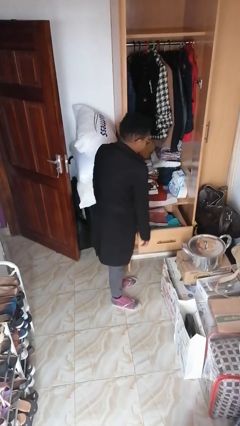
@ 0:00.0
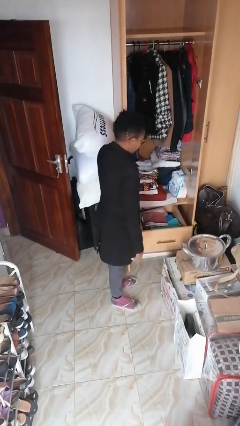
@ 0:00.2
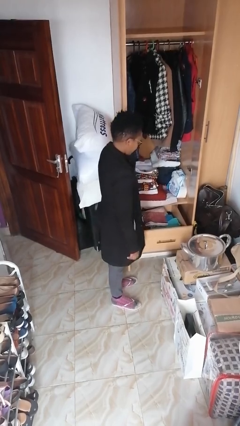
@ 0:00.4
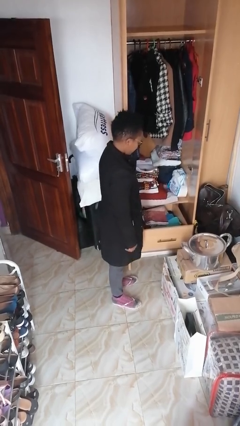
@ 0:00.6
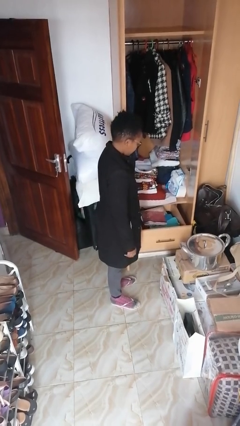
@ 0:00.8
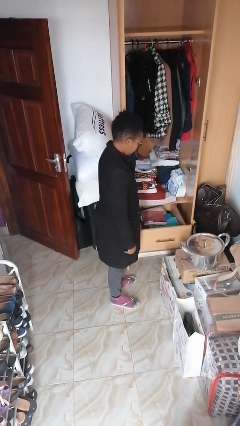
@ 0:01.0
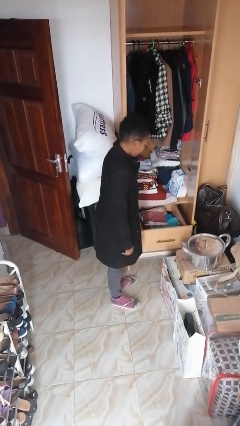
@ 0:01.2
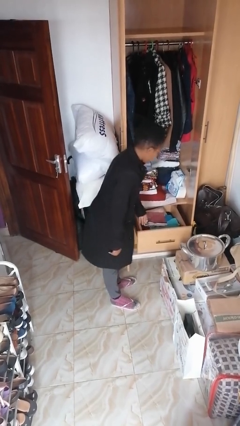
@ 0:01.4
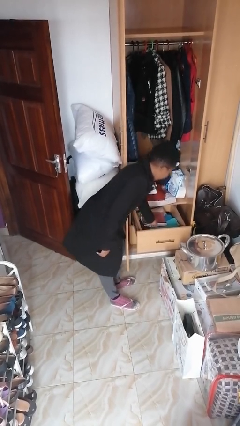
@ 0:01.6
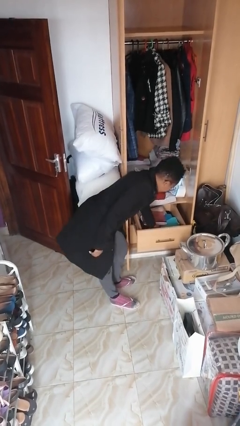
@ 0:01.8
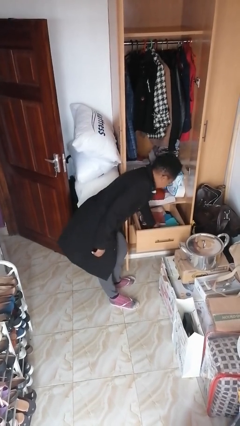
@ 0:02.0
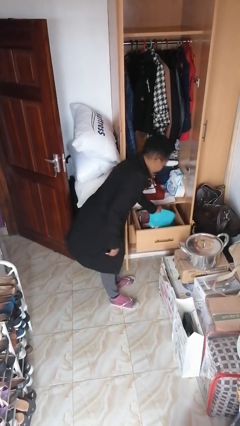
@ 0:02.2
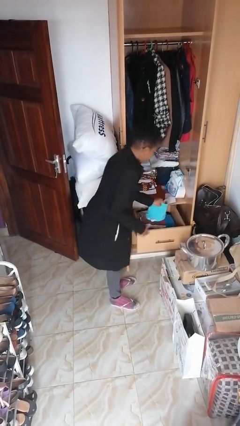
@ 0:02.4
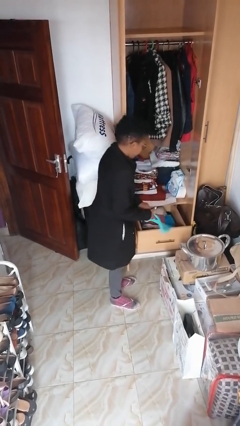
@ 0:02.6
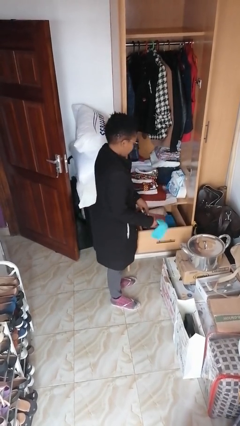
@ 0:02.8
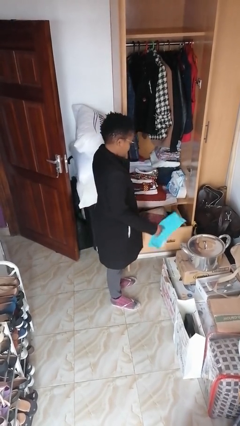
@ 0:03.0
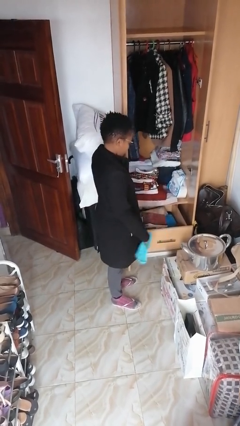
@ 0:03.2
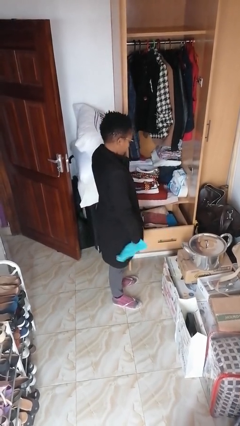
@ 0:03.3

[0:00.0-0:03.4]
person pets cat

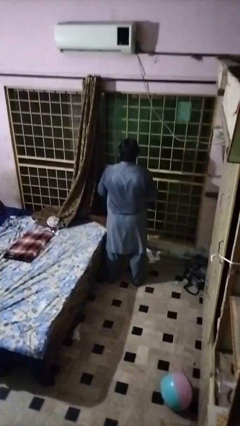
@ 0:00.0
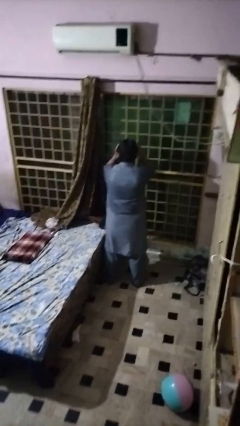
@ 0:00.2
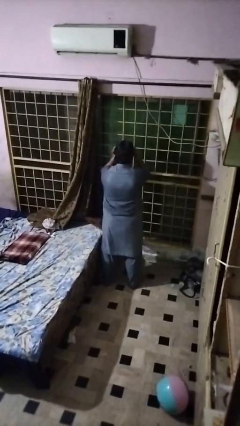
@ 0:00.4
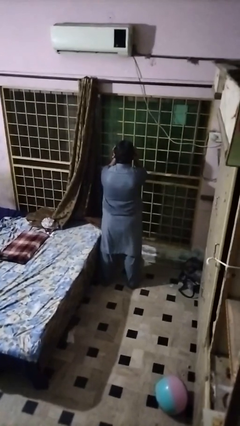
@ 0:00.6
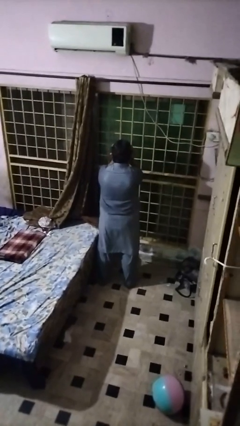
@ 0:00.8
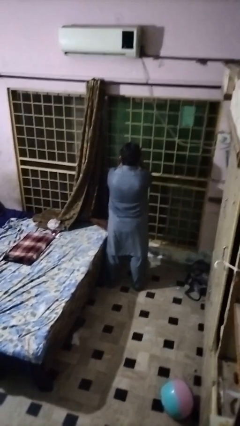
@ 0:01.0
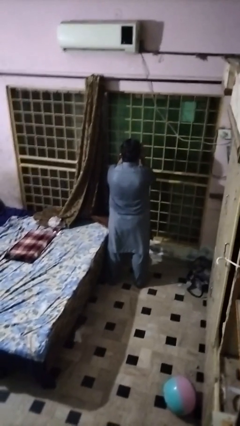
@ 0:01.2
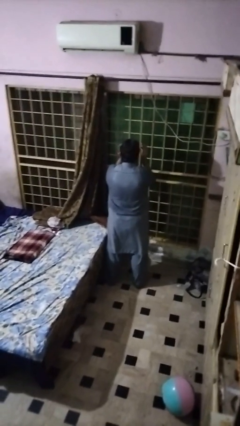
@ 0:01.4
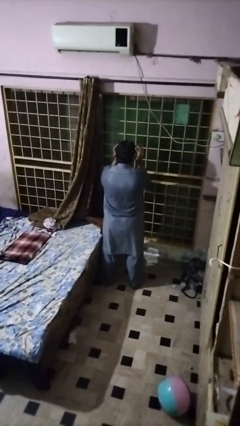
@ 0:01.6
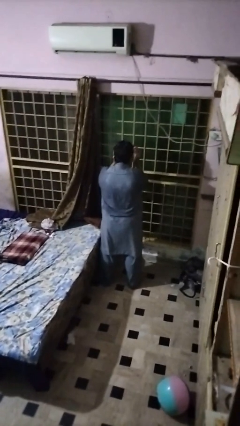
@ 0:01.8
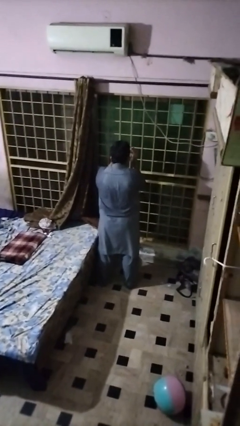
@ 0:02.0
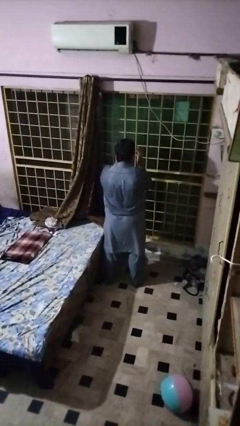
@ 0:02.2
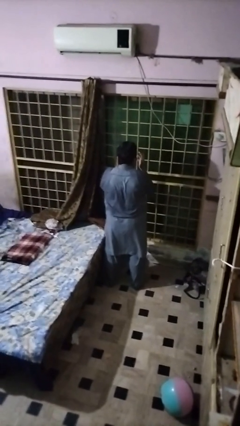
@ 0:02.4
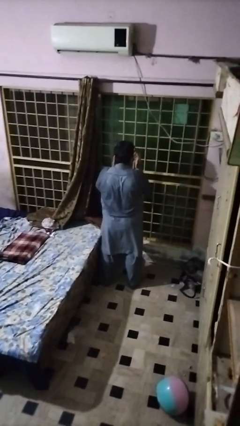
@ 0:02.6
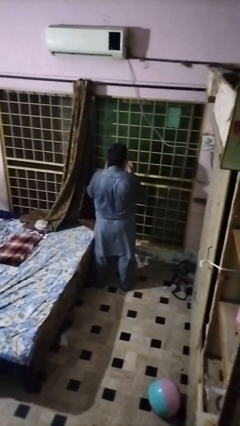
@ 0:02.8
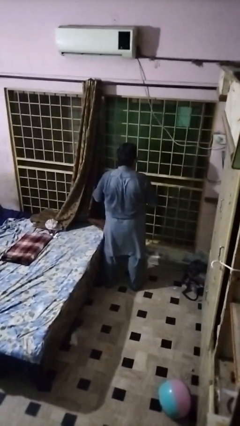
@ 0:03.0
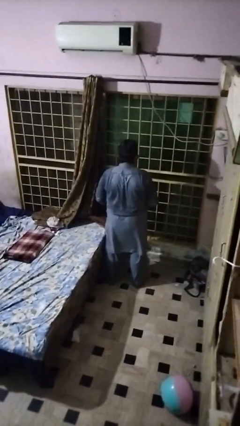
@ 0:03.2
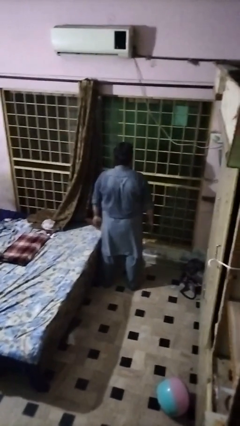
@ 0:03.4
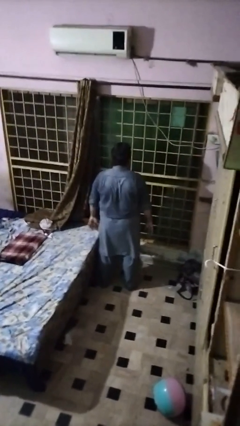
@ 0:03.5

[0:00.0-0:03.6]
person covers face with hands

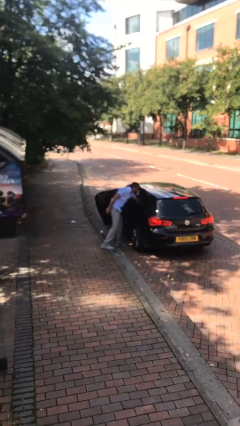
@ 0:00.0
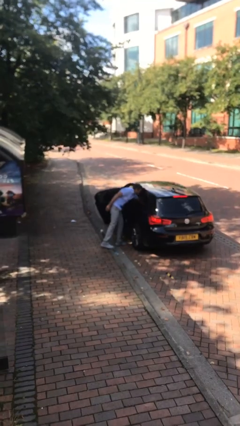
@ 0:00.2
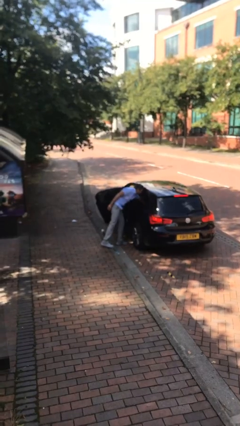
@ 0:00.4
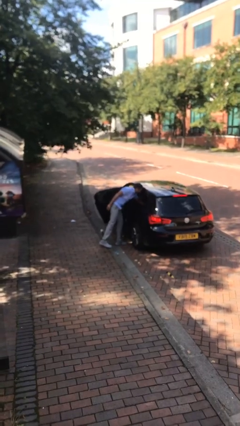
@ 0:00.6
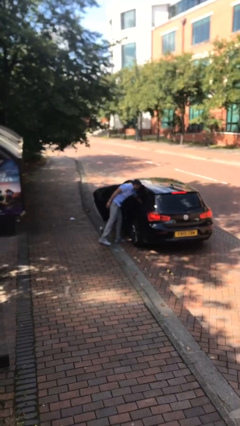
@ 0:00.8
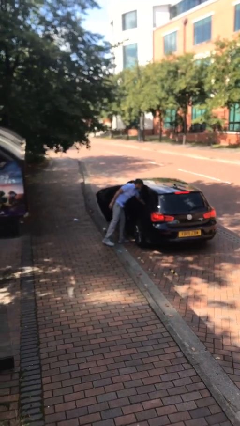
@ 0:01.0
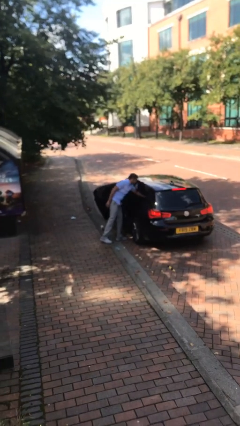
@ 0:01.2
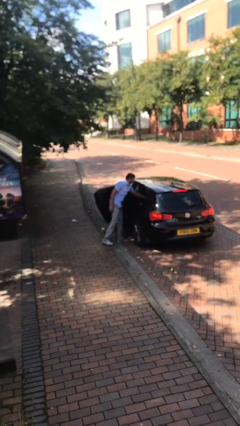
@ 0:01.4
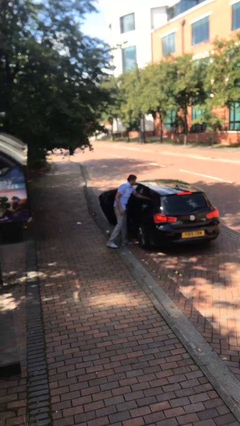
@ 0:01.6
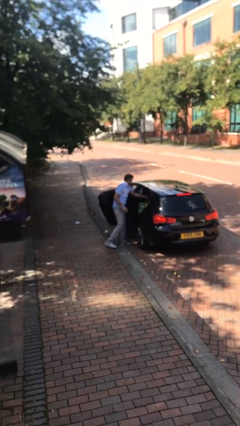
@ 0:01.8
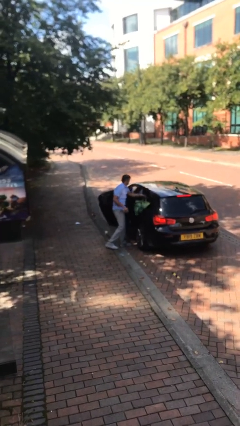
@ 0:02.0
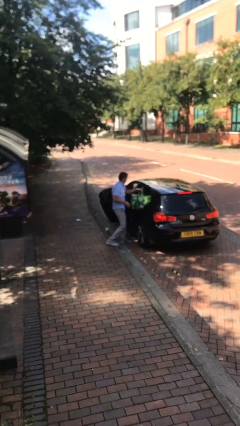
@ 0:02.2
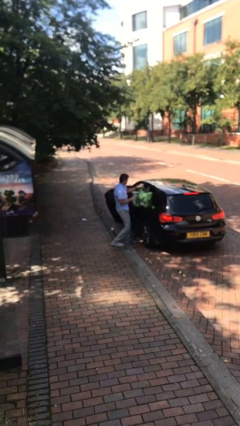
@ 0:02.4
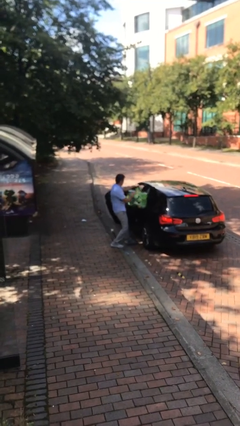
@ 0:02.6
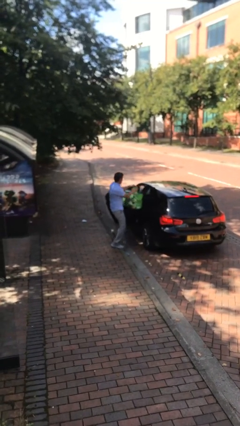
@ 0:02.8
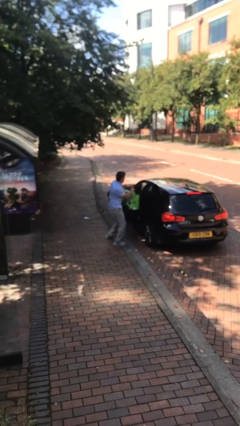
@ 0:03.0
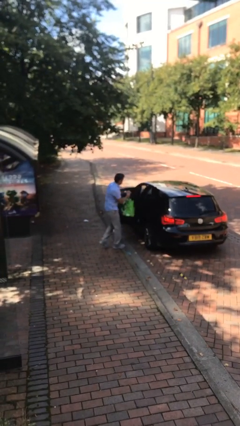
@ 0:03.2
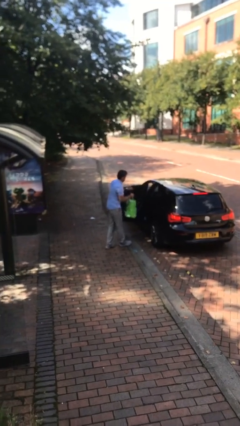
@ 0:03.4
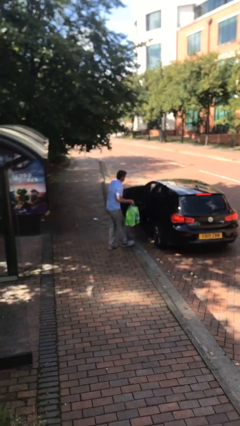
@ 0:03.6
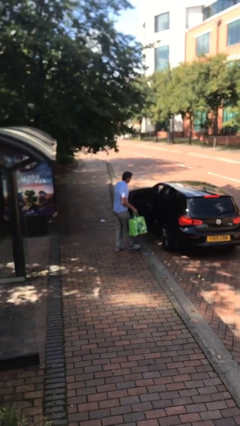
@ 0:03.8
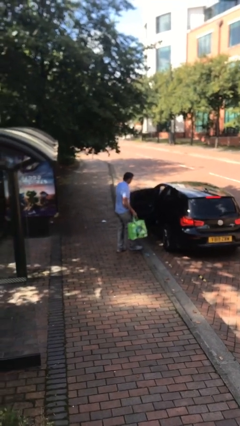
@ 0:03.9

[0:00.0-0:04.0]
person unloads car

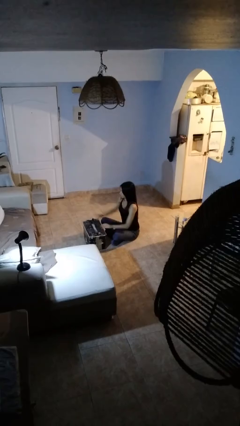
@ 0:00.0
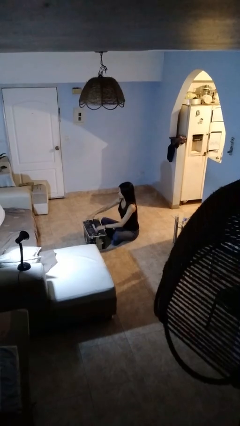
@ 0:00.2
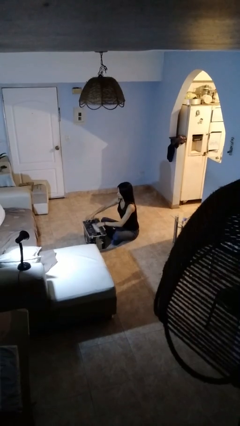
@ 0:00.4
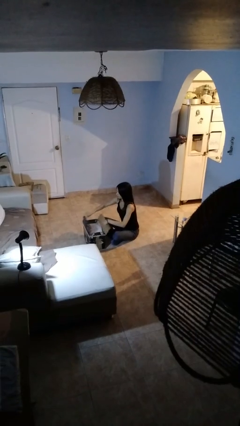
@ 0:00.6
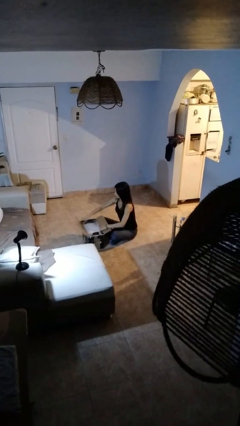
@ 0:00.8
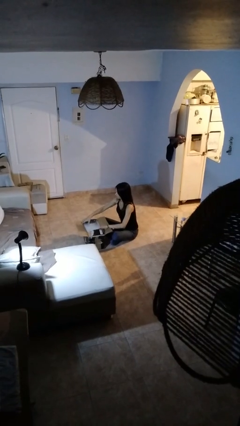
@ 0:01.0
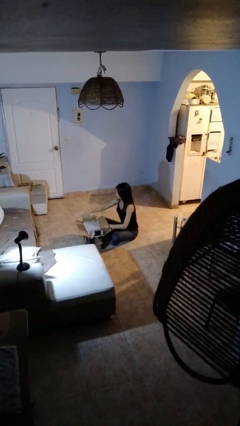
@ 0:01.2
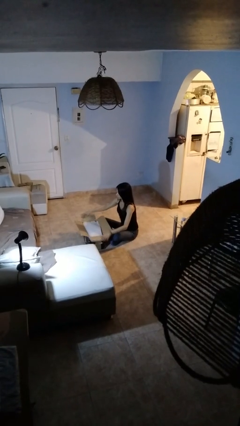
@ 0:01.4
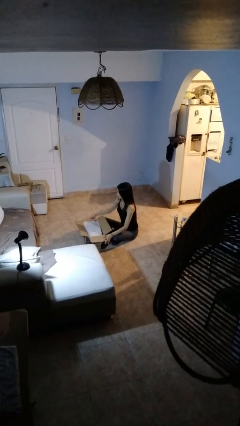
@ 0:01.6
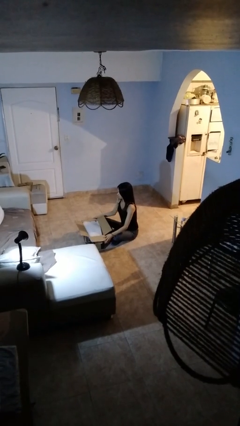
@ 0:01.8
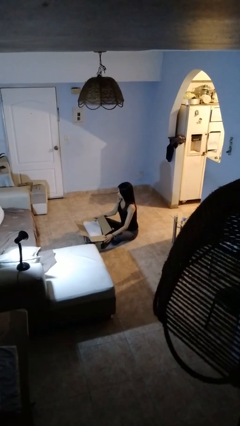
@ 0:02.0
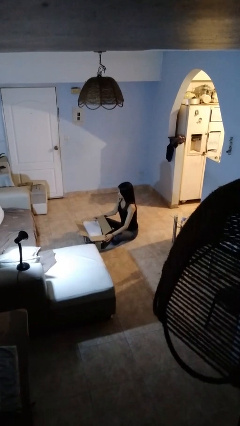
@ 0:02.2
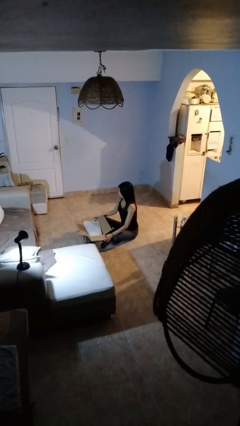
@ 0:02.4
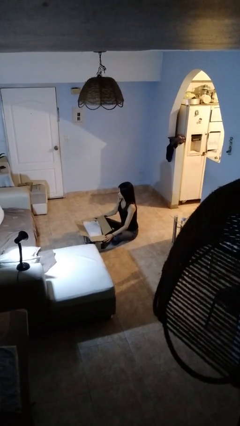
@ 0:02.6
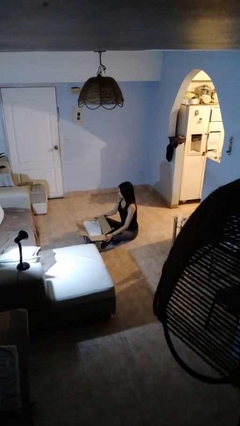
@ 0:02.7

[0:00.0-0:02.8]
person opens box

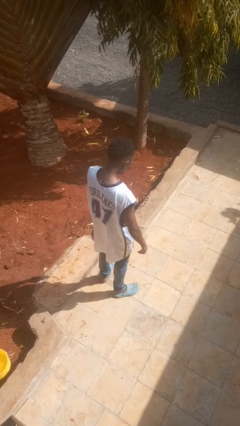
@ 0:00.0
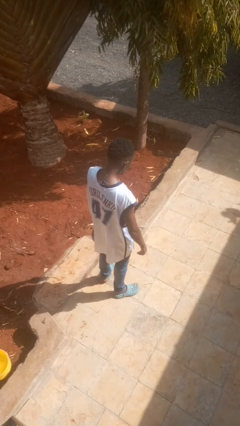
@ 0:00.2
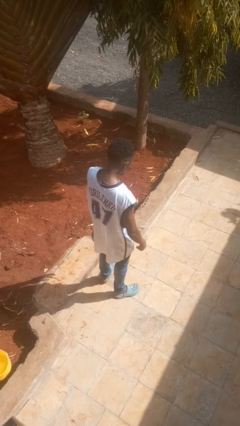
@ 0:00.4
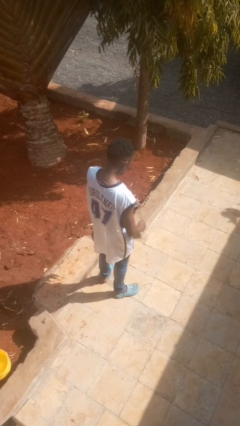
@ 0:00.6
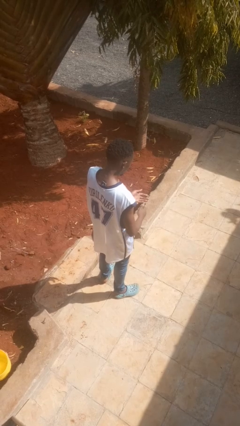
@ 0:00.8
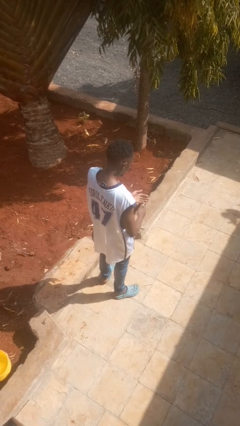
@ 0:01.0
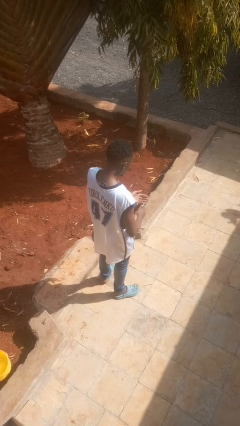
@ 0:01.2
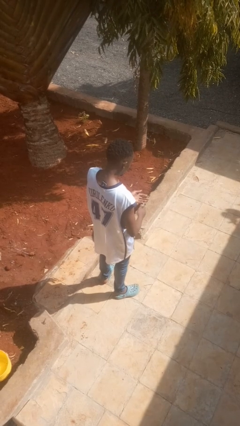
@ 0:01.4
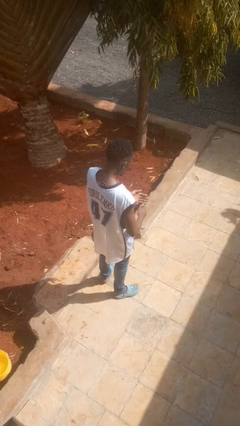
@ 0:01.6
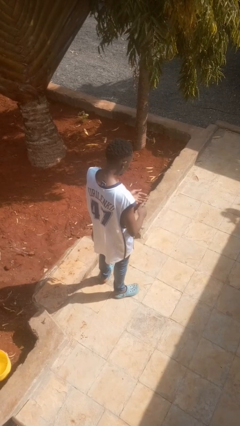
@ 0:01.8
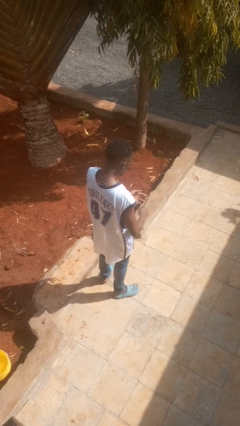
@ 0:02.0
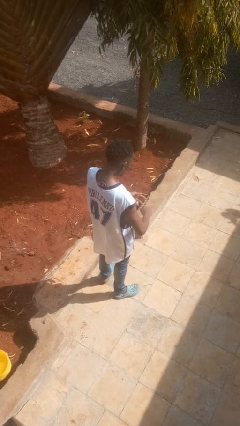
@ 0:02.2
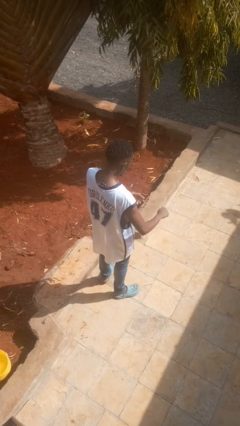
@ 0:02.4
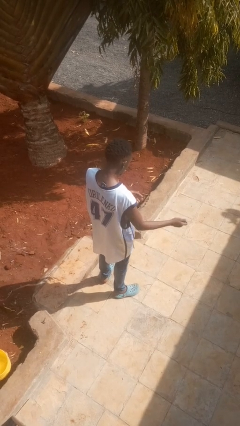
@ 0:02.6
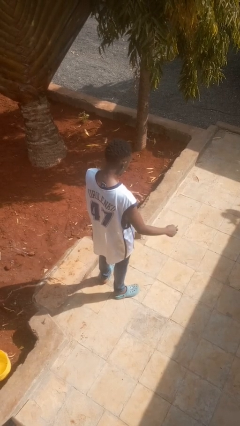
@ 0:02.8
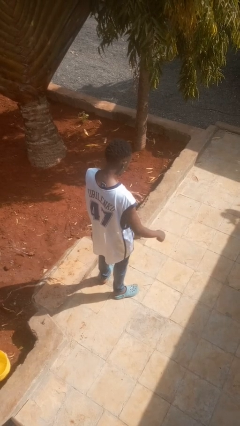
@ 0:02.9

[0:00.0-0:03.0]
person clips fingernails

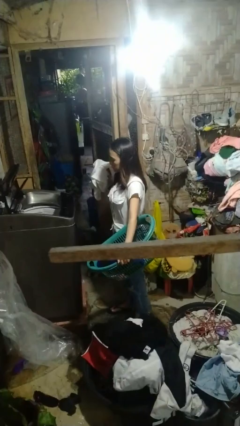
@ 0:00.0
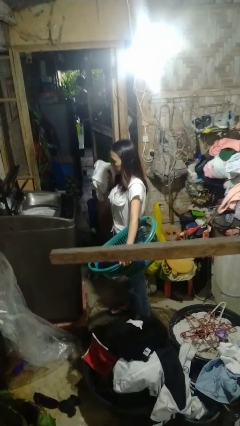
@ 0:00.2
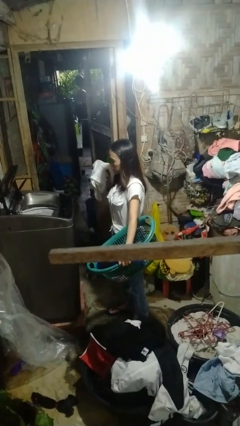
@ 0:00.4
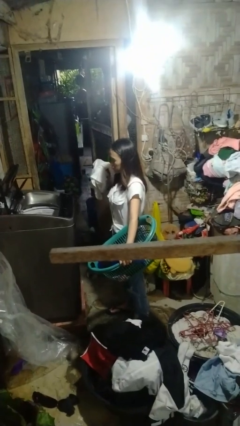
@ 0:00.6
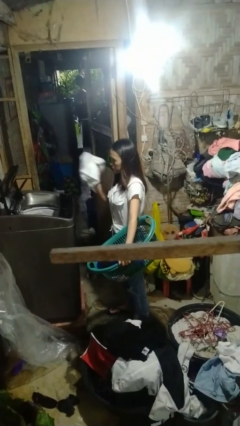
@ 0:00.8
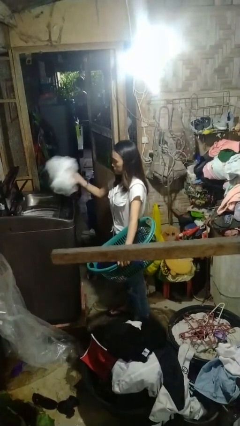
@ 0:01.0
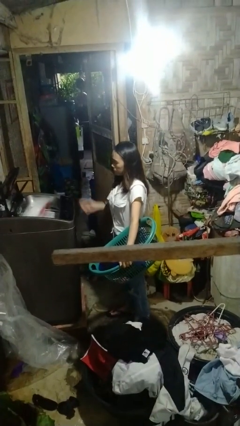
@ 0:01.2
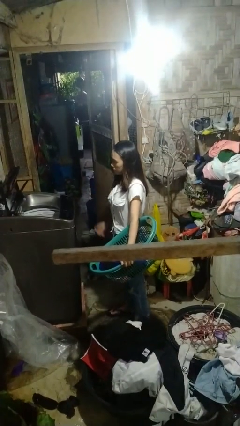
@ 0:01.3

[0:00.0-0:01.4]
person loads dryer
